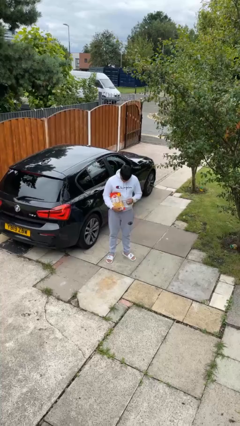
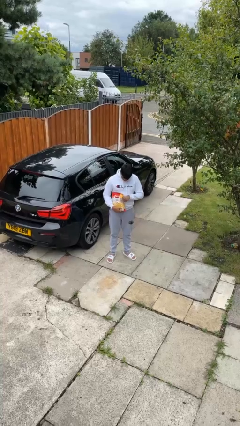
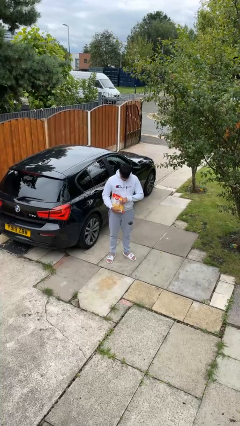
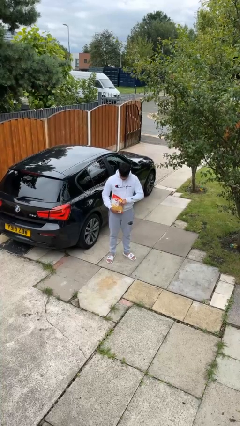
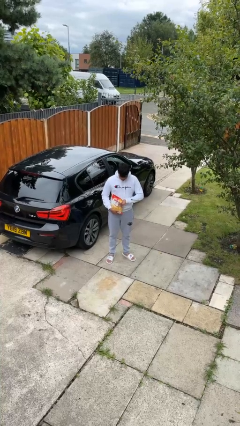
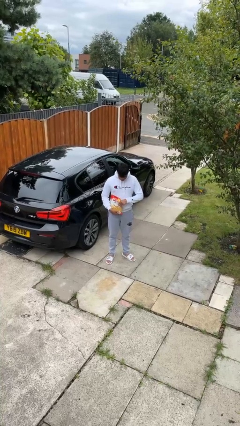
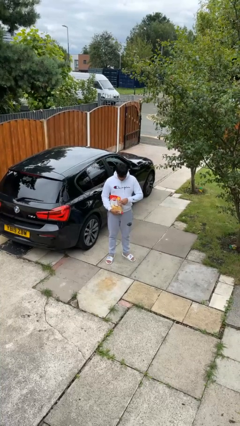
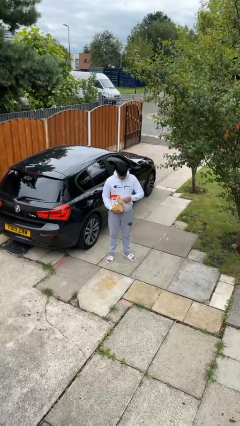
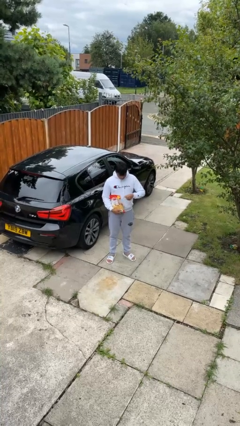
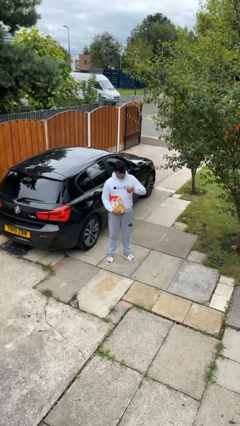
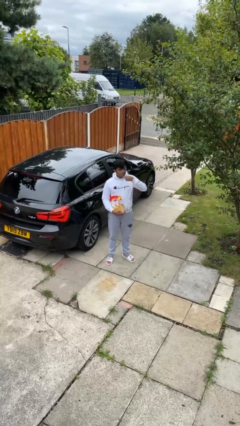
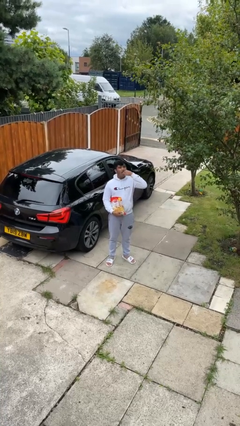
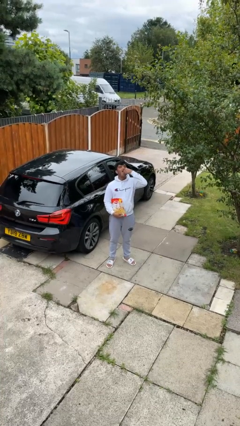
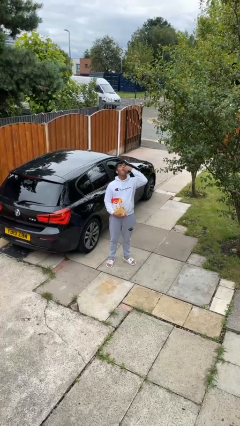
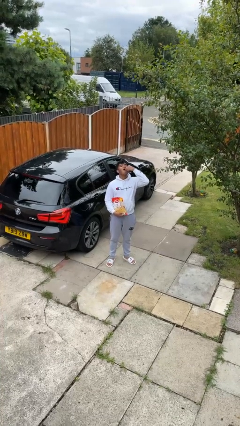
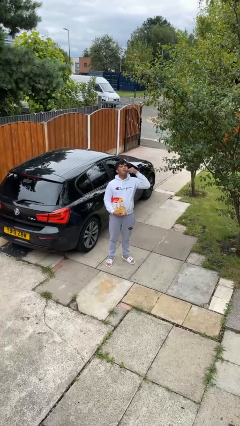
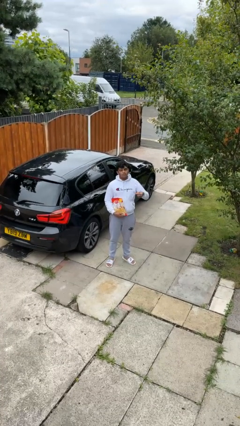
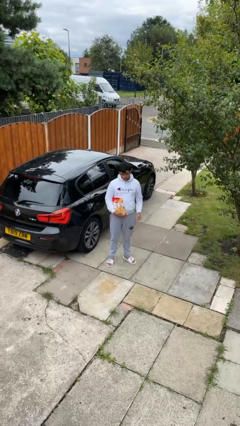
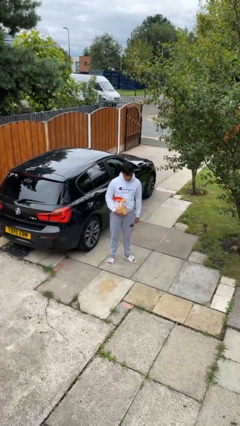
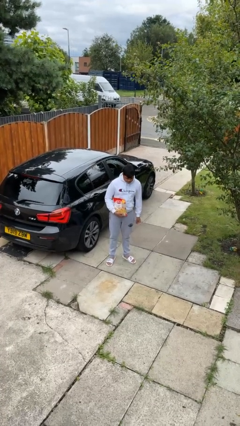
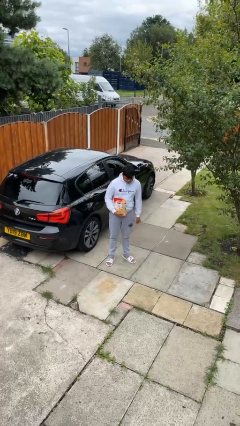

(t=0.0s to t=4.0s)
person eats snack from bag

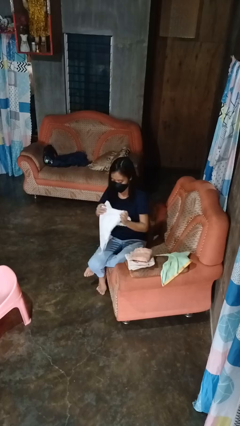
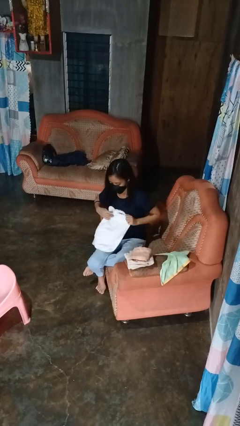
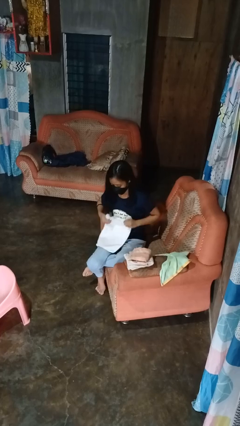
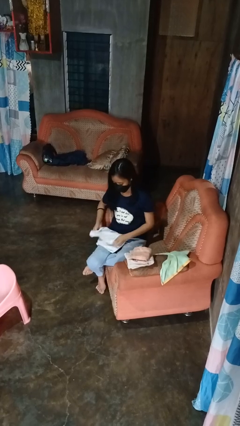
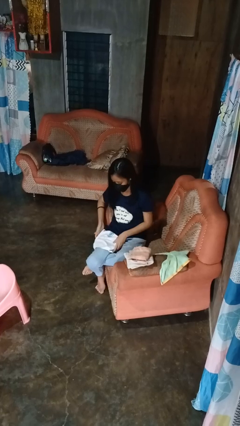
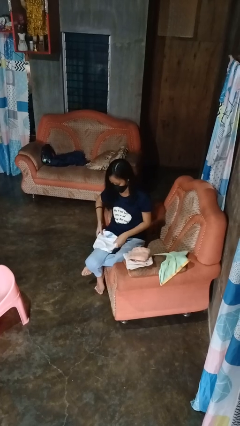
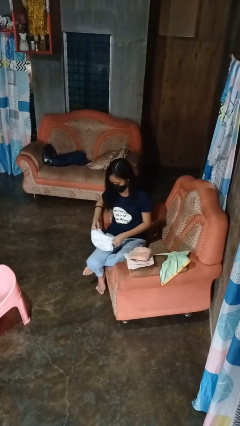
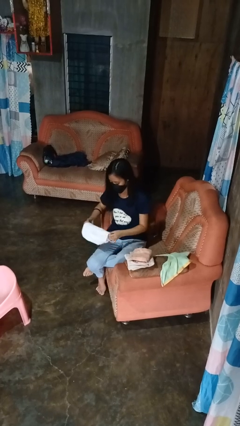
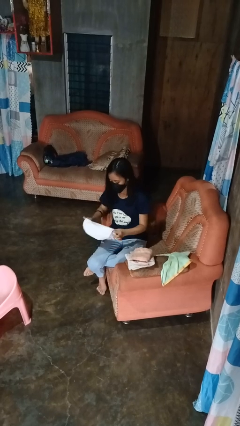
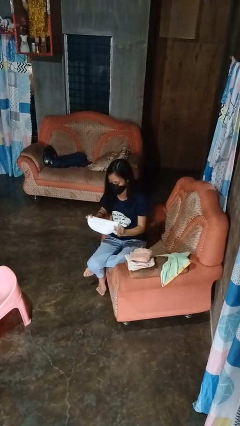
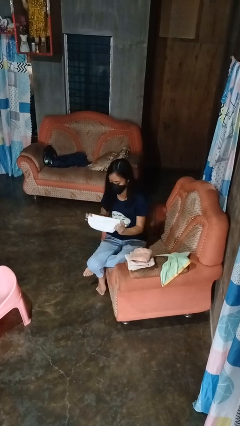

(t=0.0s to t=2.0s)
person folds towel

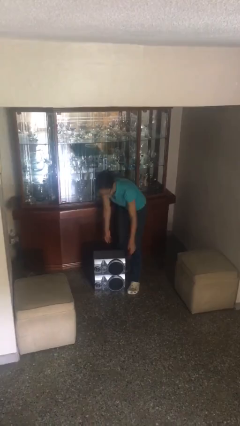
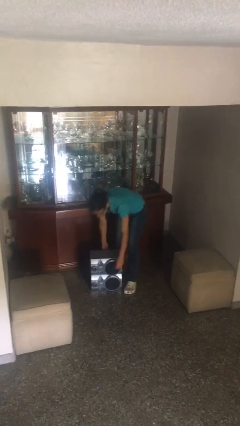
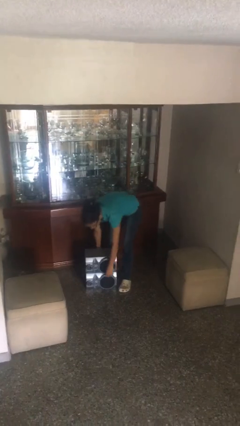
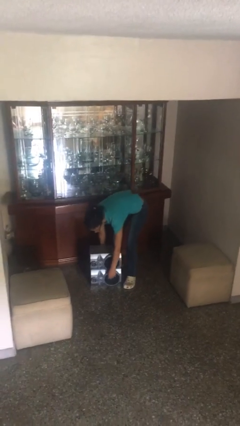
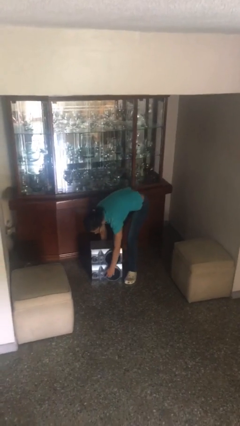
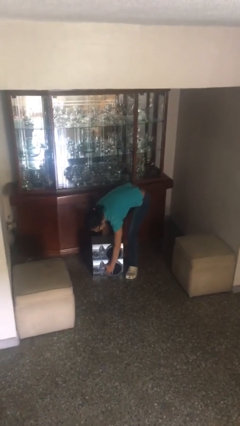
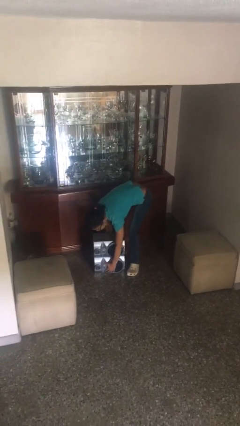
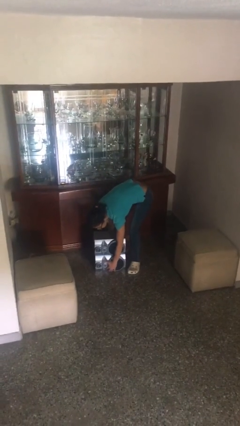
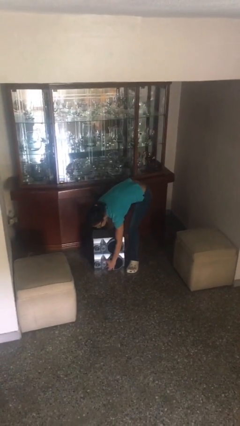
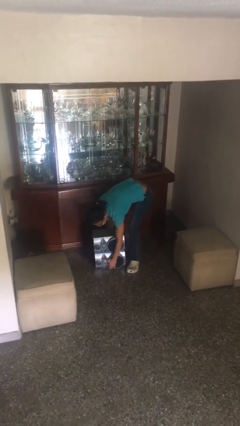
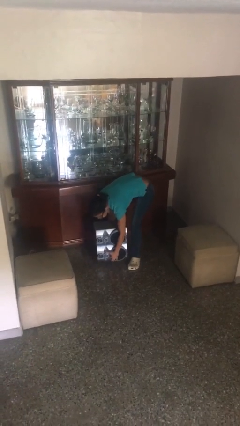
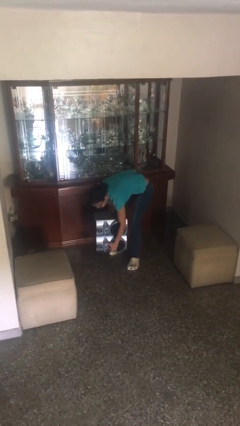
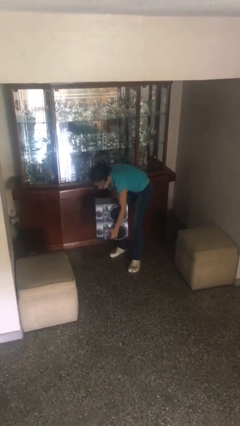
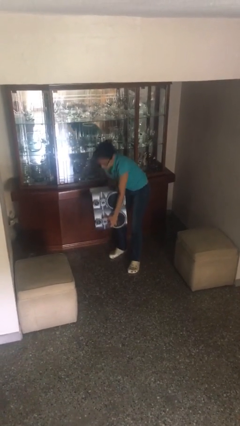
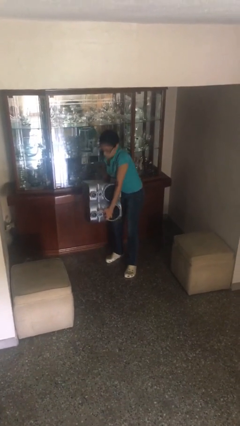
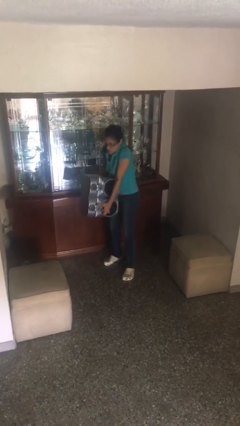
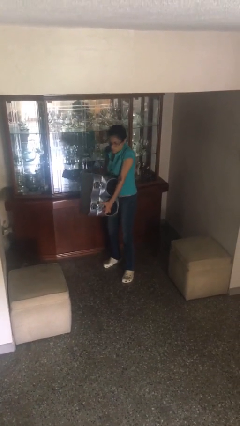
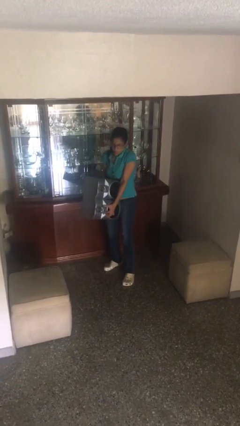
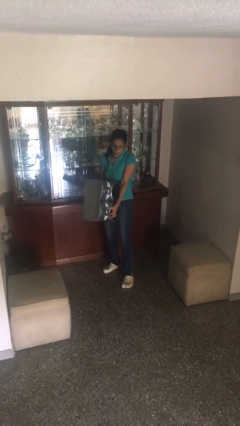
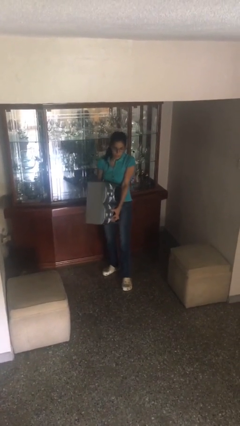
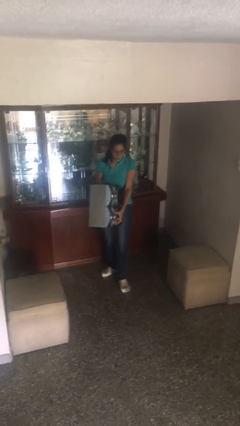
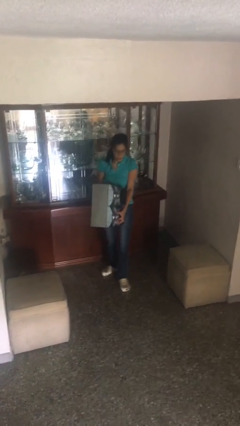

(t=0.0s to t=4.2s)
person picks up object from floor

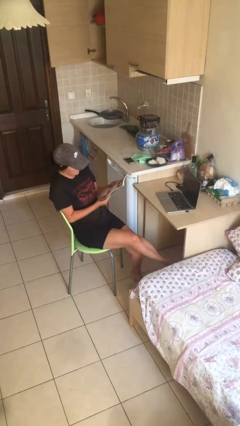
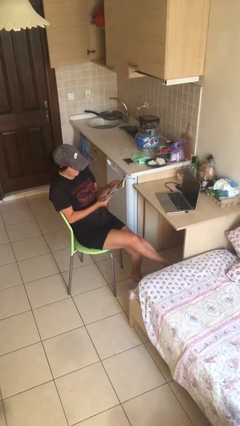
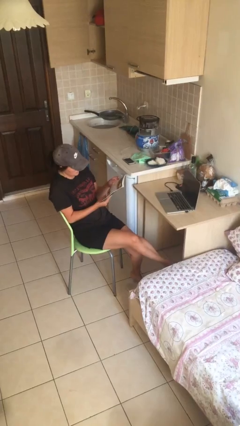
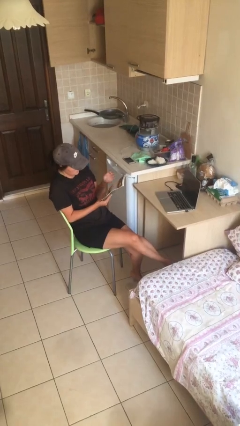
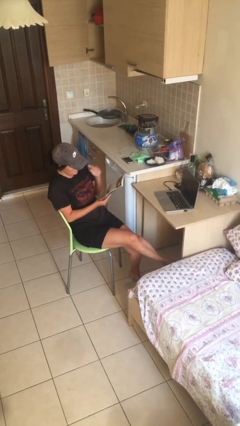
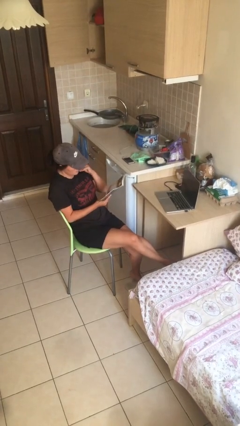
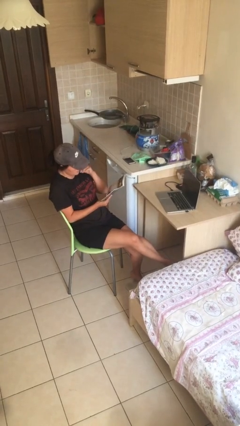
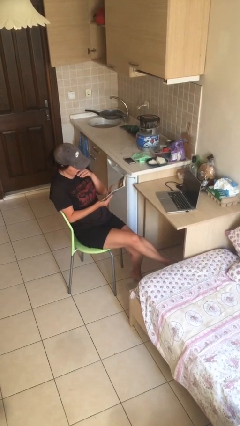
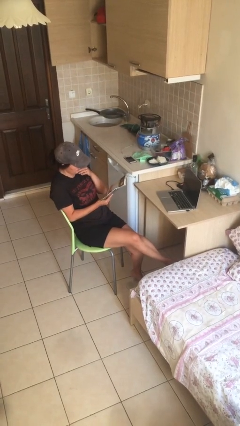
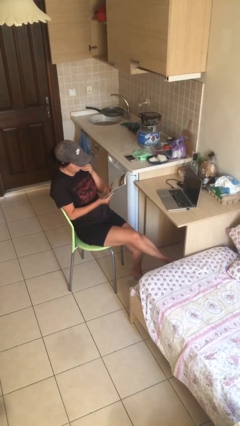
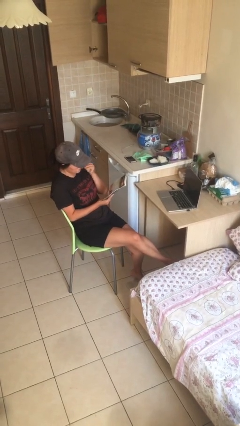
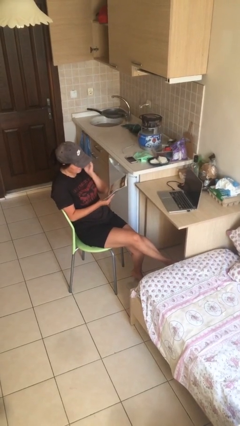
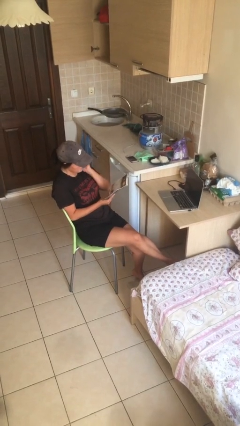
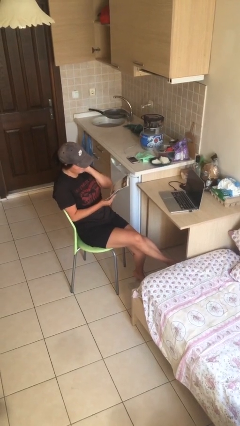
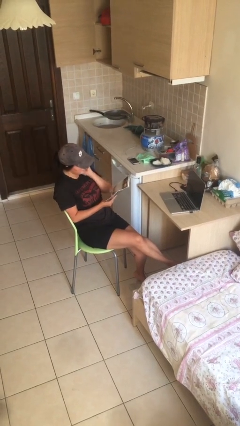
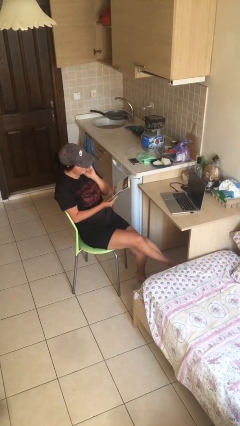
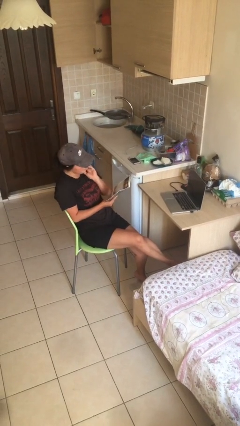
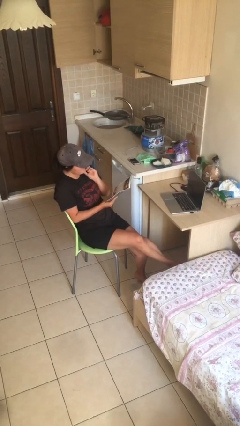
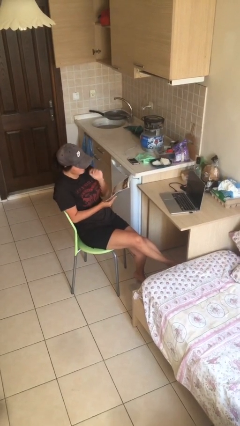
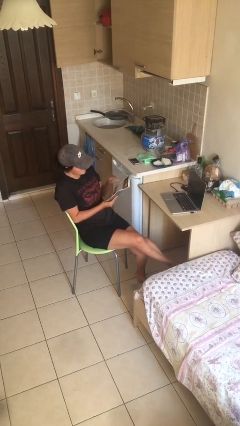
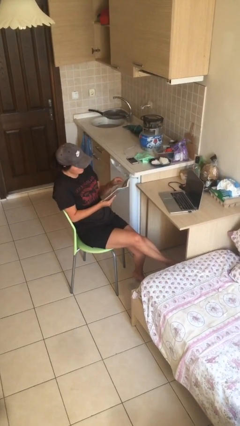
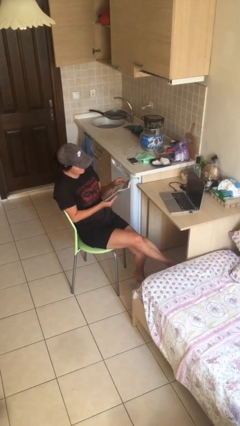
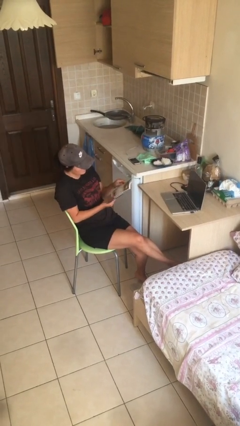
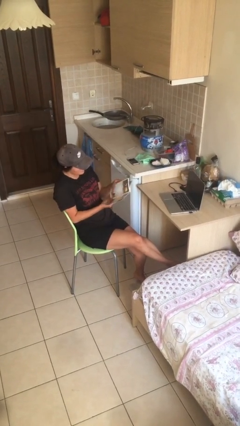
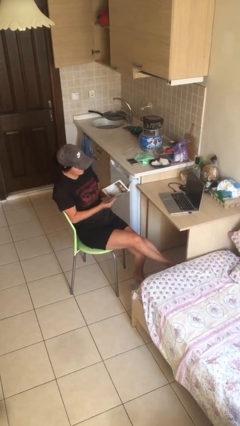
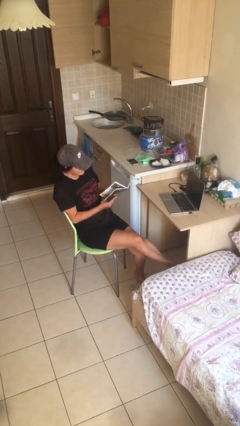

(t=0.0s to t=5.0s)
person reads document

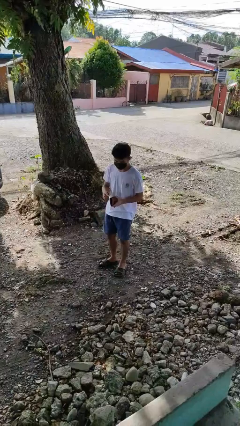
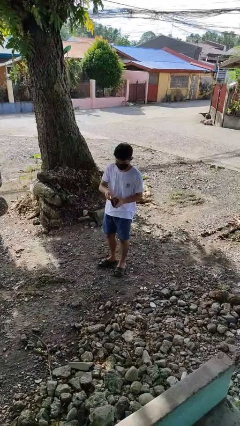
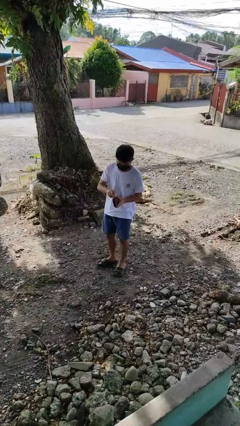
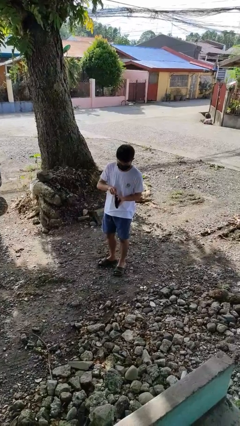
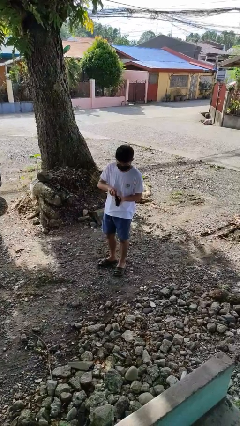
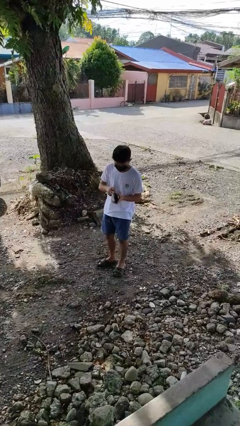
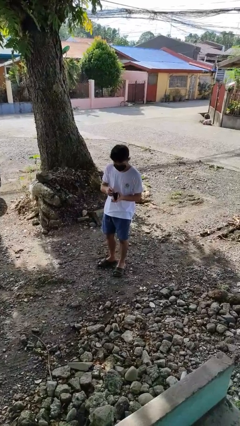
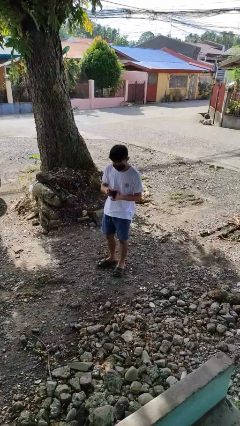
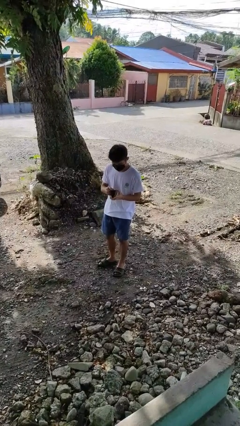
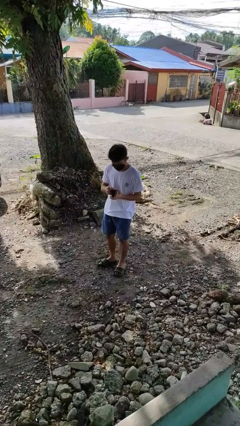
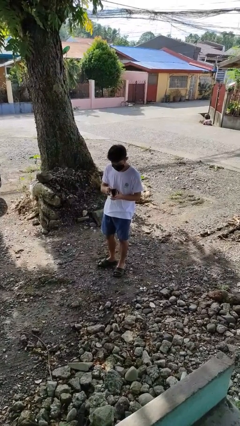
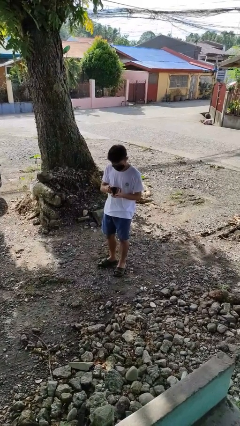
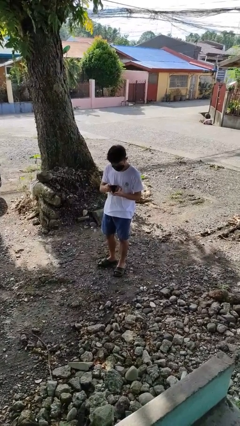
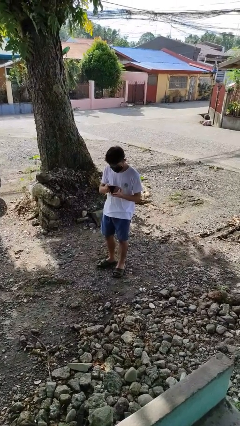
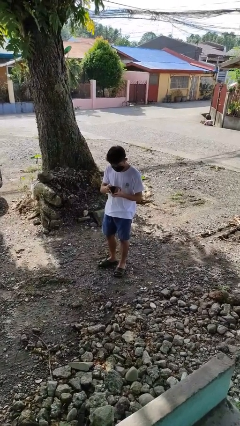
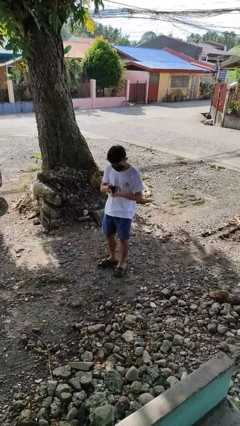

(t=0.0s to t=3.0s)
person searches in purse
